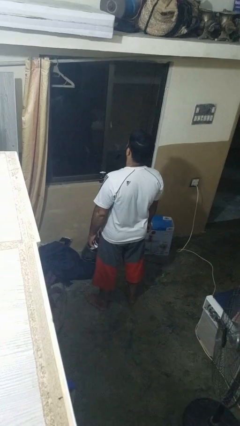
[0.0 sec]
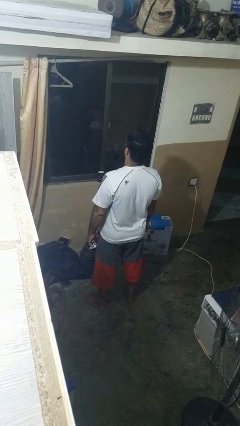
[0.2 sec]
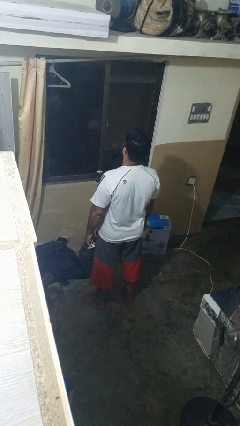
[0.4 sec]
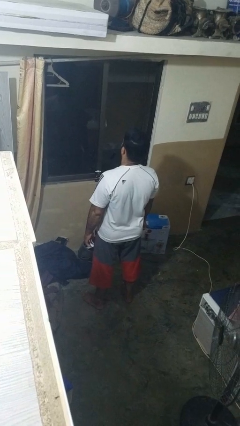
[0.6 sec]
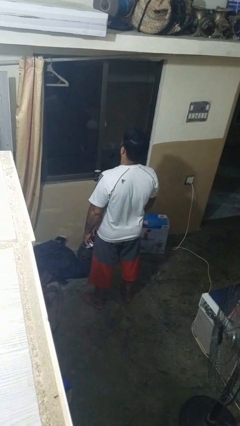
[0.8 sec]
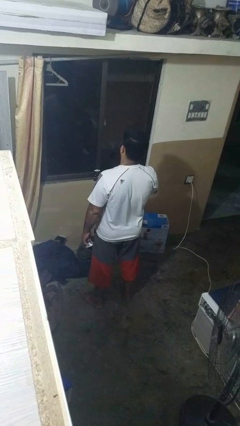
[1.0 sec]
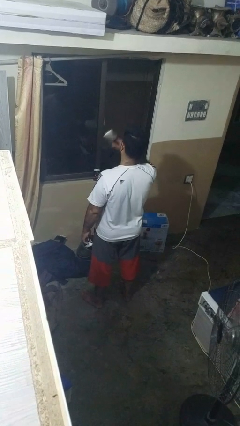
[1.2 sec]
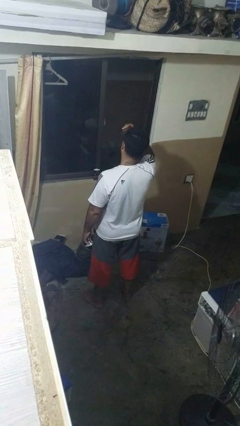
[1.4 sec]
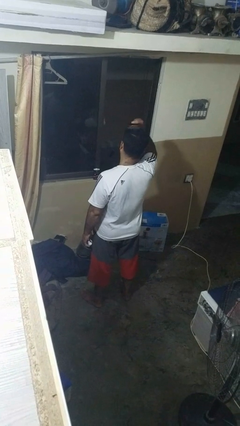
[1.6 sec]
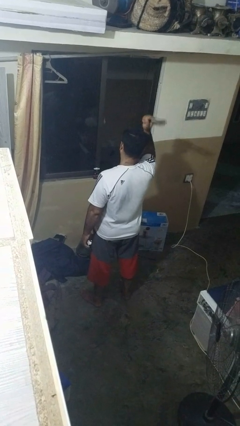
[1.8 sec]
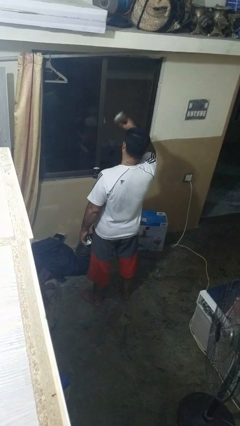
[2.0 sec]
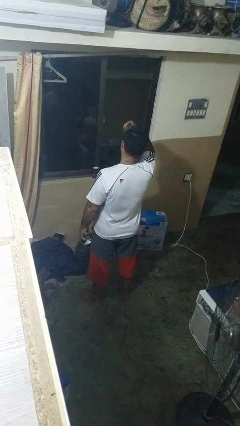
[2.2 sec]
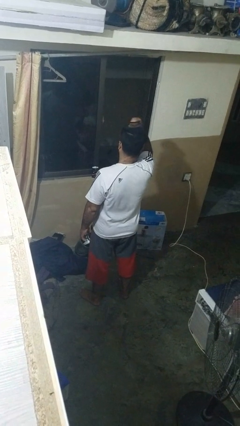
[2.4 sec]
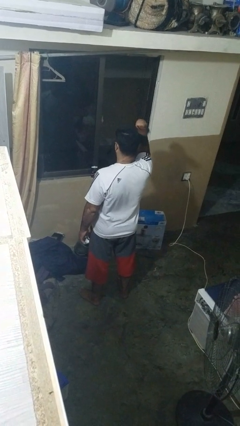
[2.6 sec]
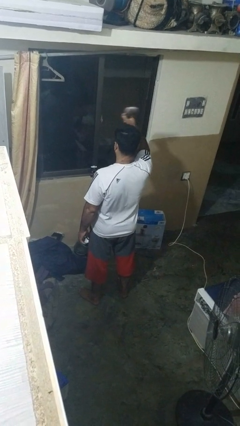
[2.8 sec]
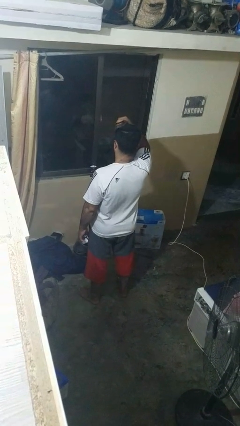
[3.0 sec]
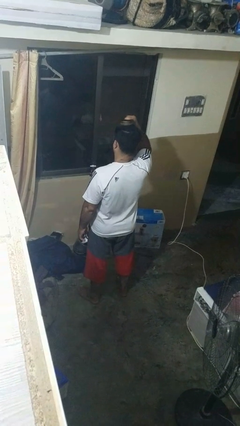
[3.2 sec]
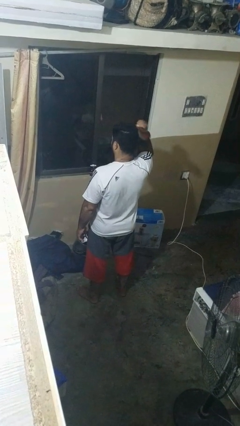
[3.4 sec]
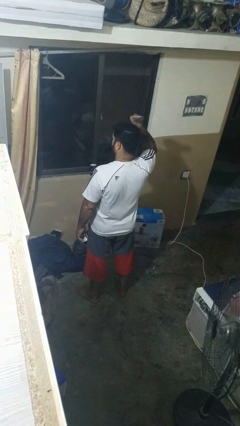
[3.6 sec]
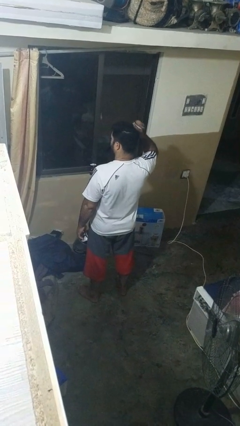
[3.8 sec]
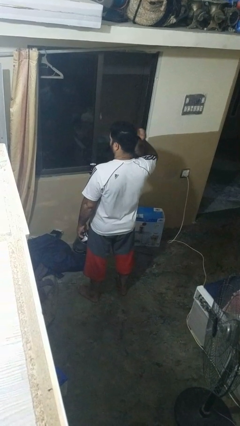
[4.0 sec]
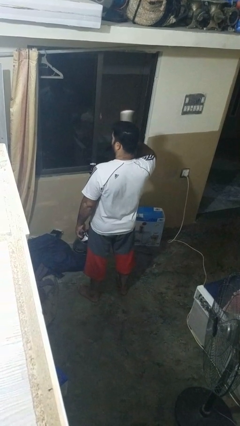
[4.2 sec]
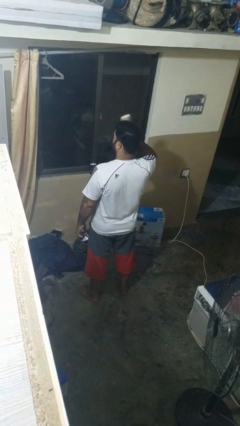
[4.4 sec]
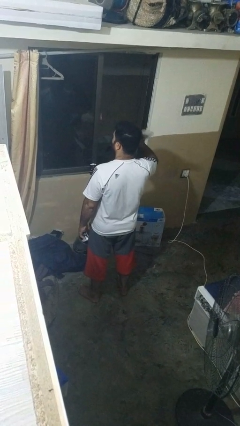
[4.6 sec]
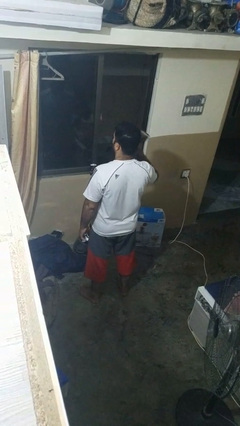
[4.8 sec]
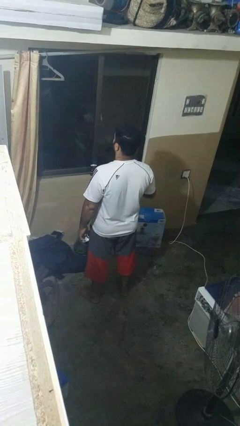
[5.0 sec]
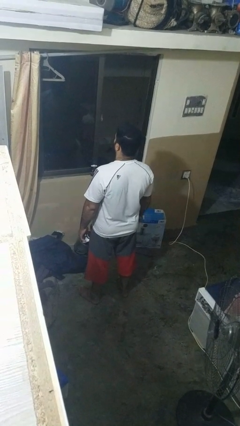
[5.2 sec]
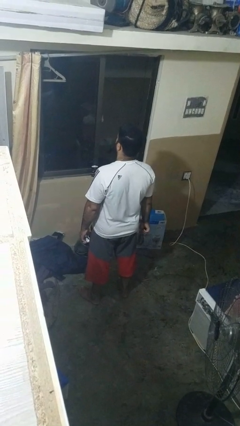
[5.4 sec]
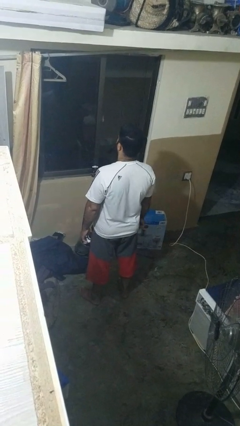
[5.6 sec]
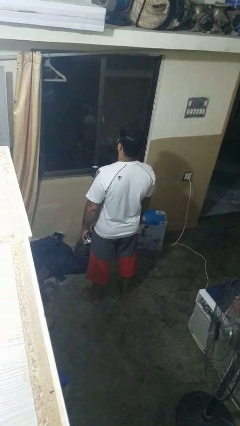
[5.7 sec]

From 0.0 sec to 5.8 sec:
person brushes hair

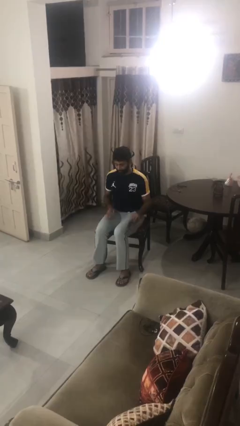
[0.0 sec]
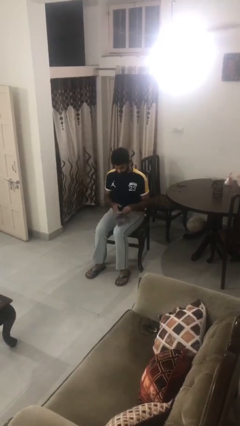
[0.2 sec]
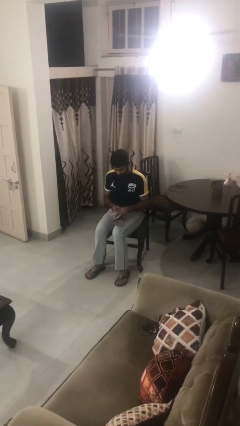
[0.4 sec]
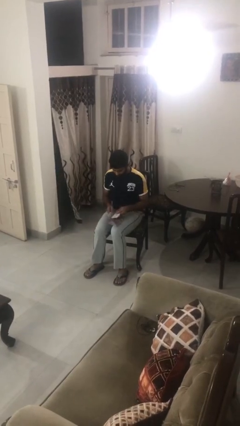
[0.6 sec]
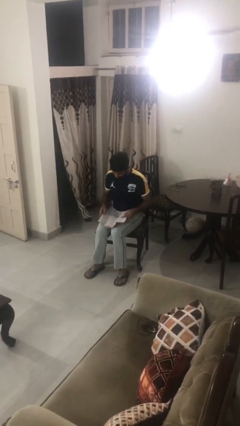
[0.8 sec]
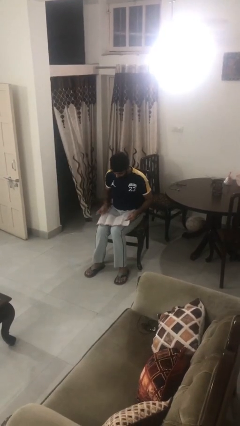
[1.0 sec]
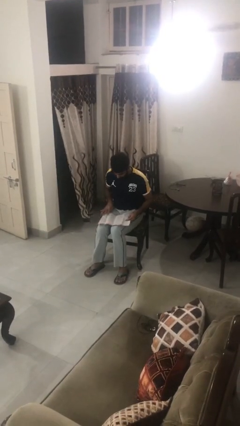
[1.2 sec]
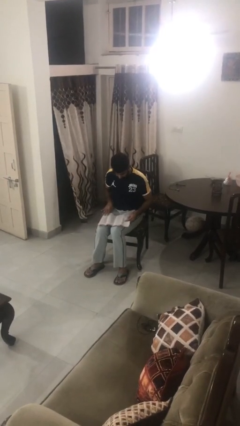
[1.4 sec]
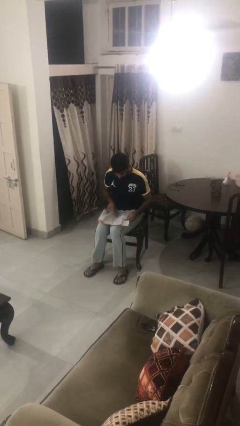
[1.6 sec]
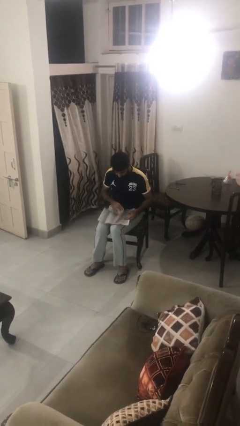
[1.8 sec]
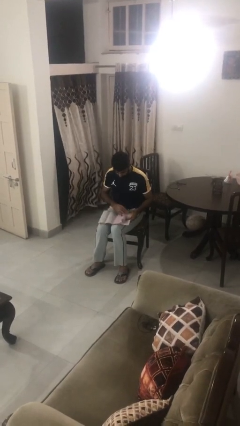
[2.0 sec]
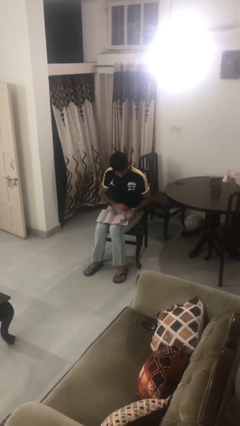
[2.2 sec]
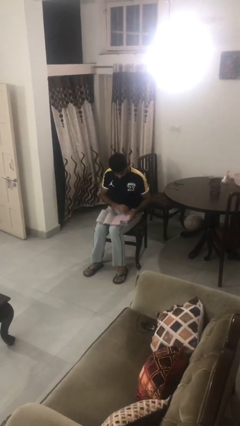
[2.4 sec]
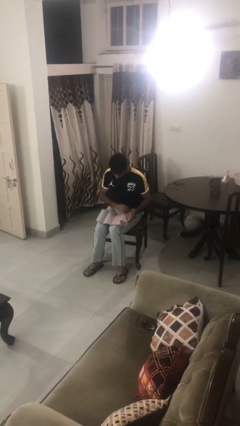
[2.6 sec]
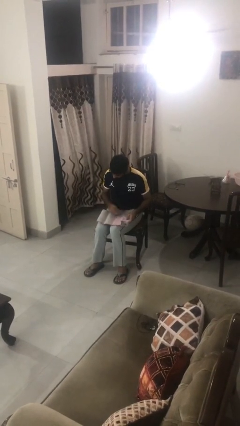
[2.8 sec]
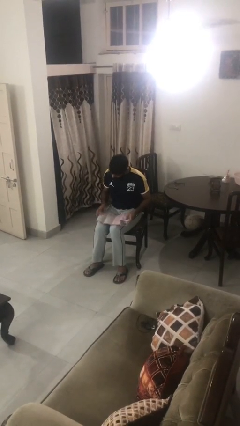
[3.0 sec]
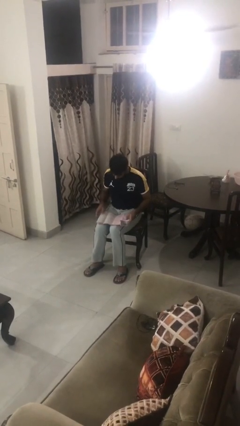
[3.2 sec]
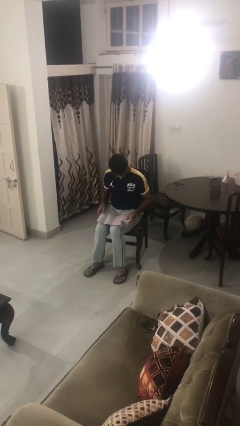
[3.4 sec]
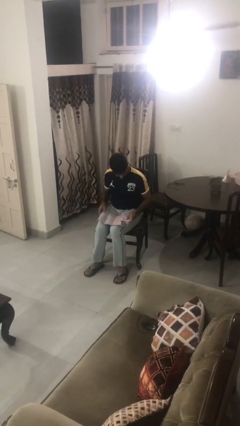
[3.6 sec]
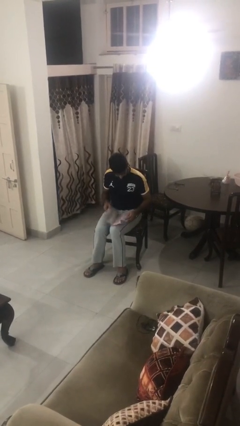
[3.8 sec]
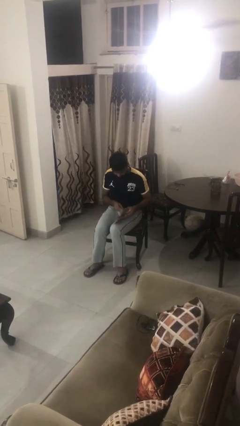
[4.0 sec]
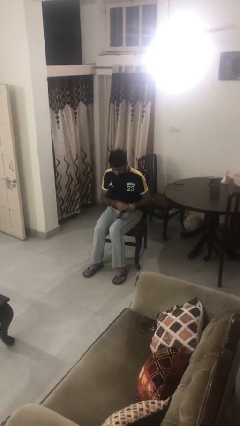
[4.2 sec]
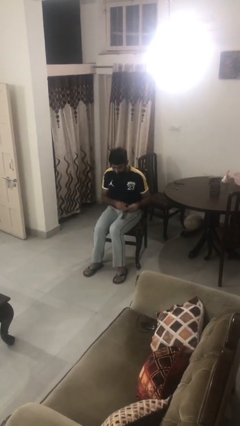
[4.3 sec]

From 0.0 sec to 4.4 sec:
person reads magazine

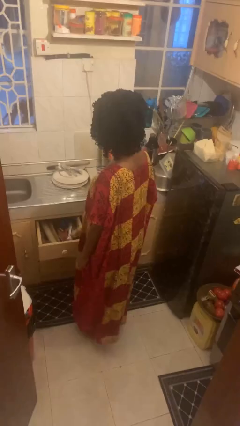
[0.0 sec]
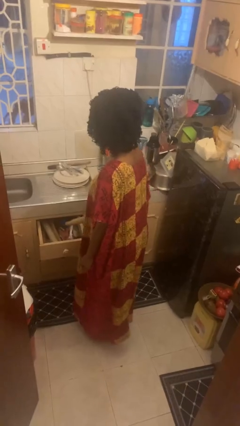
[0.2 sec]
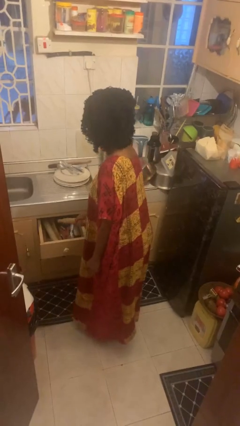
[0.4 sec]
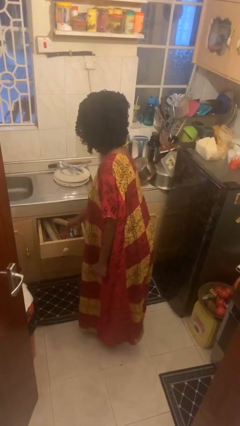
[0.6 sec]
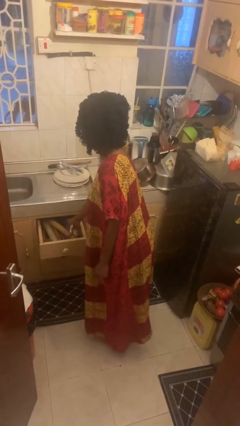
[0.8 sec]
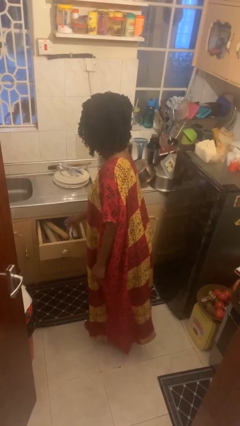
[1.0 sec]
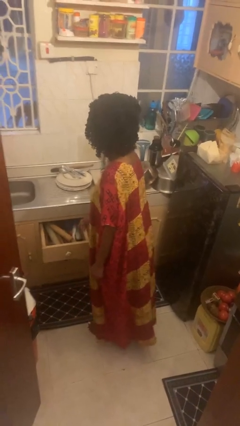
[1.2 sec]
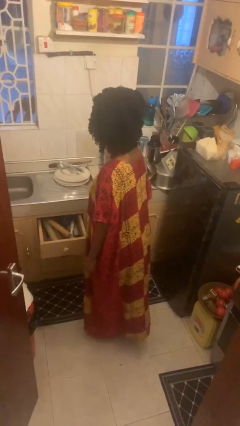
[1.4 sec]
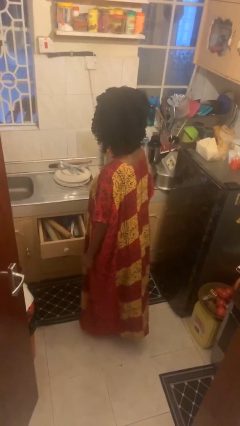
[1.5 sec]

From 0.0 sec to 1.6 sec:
person puts object into kitchen drawer

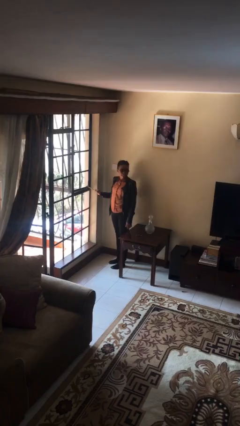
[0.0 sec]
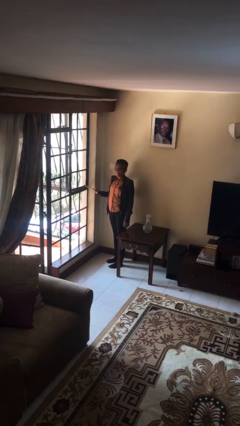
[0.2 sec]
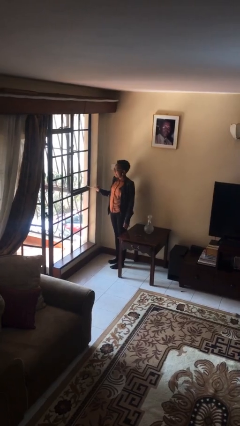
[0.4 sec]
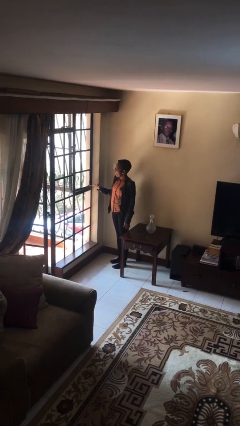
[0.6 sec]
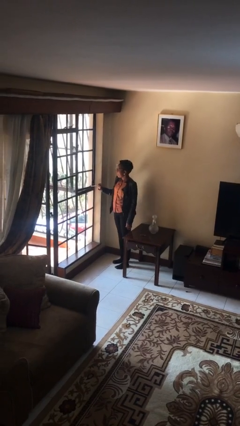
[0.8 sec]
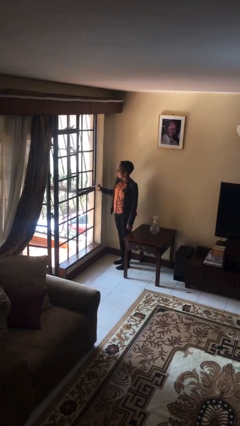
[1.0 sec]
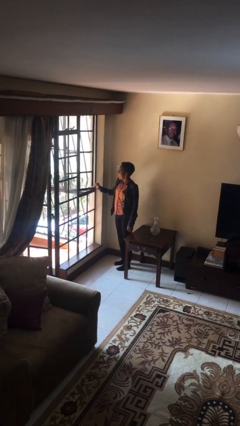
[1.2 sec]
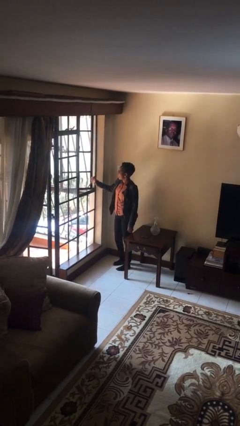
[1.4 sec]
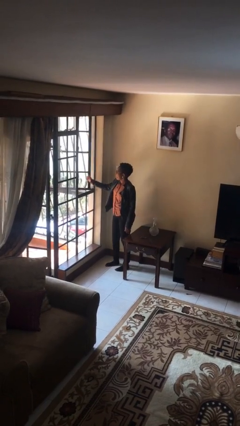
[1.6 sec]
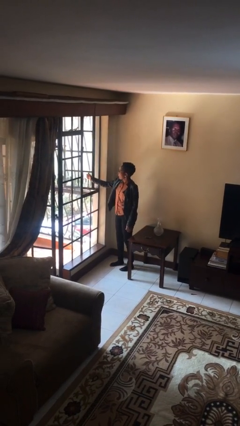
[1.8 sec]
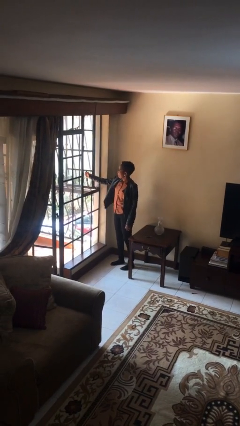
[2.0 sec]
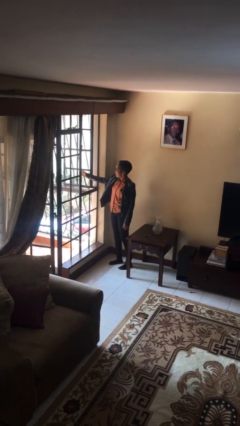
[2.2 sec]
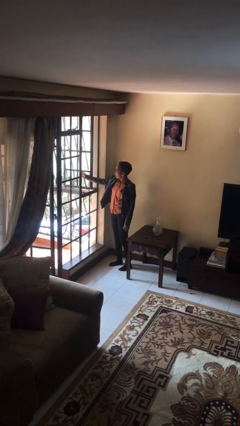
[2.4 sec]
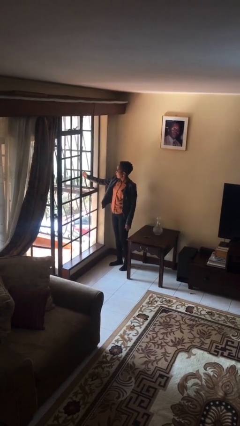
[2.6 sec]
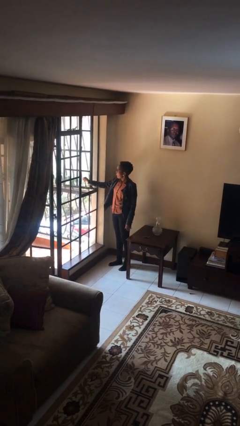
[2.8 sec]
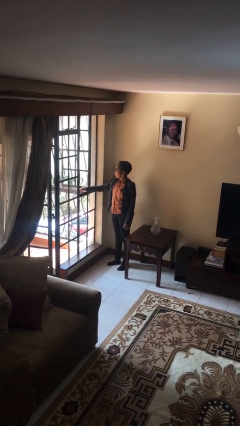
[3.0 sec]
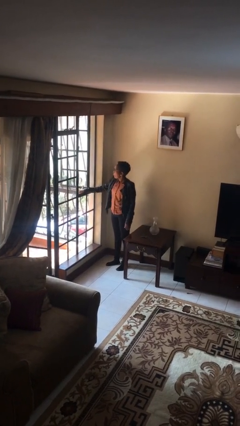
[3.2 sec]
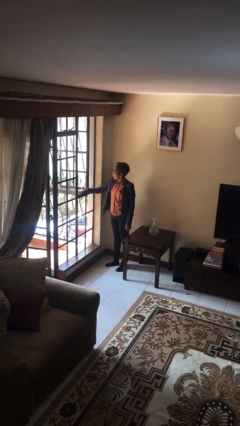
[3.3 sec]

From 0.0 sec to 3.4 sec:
person opens home window

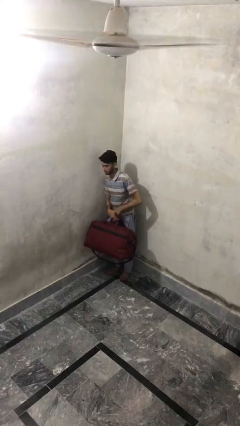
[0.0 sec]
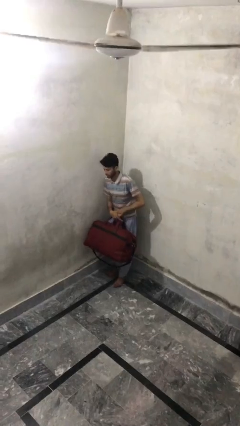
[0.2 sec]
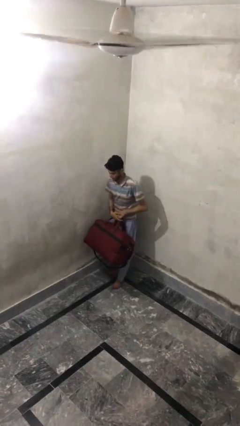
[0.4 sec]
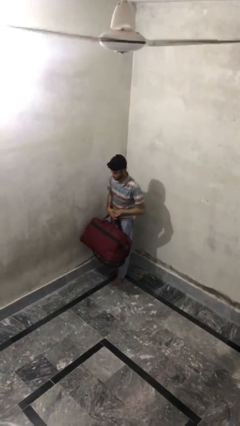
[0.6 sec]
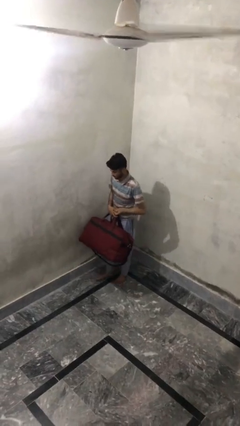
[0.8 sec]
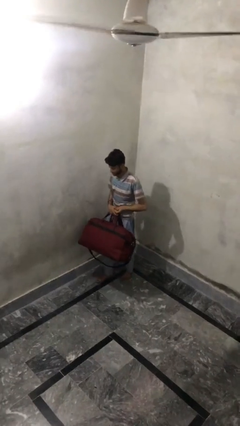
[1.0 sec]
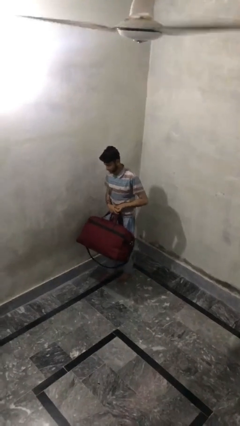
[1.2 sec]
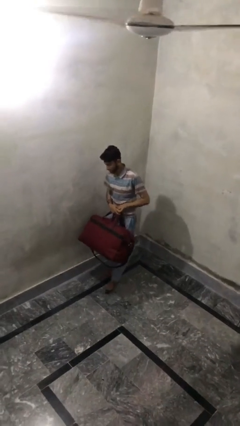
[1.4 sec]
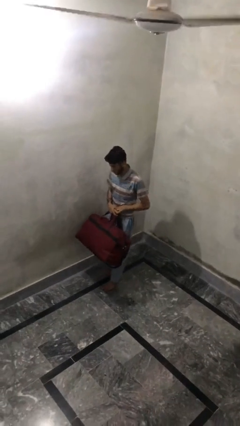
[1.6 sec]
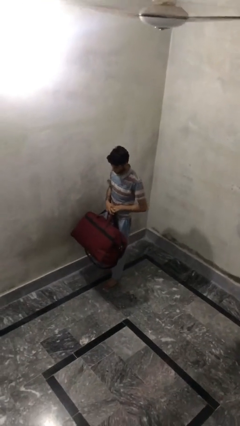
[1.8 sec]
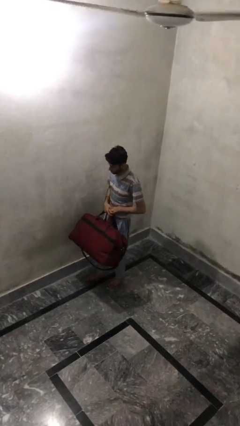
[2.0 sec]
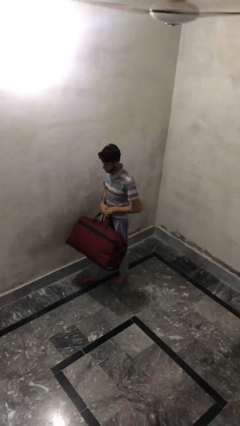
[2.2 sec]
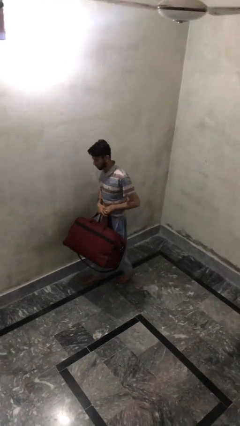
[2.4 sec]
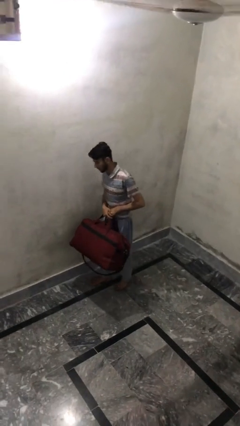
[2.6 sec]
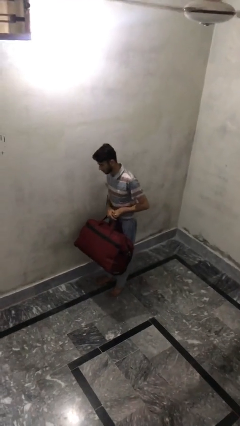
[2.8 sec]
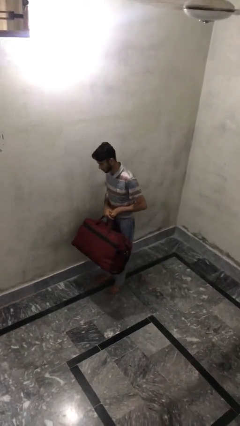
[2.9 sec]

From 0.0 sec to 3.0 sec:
person carries heavy object
